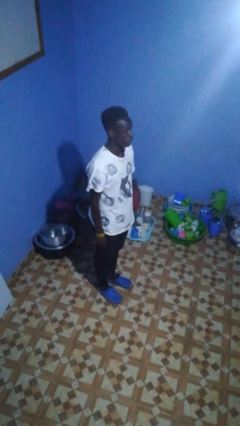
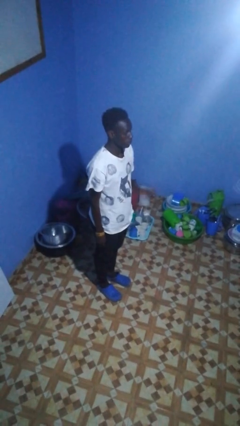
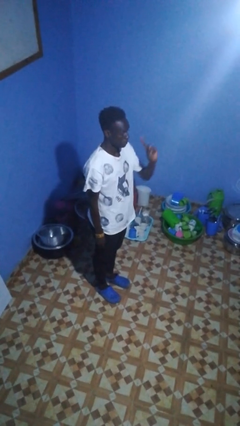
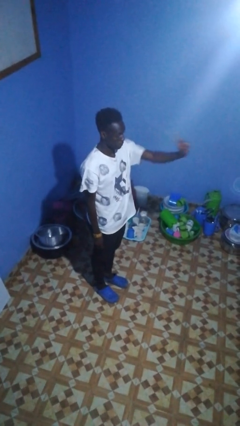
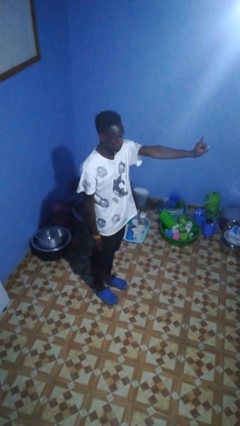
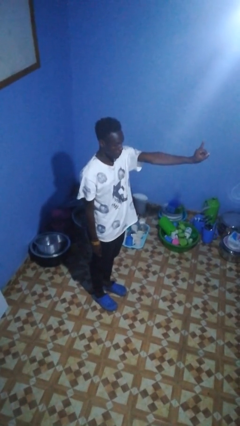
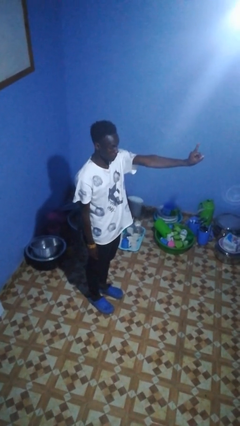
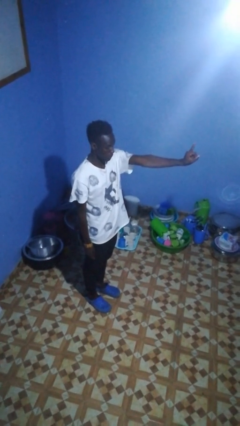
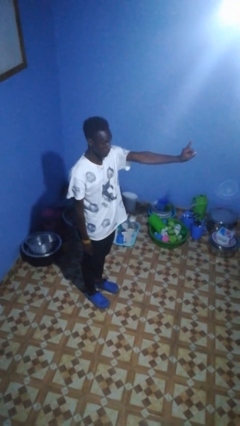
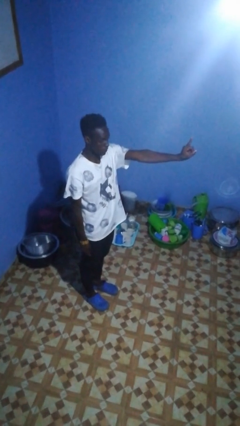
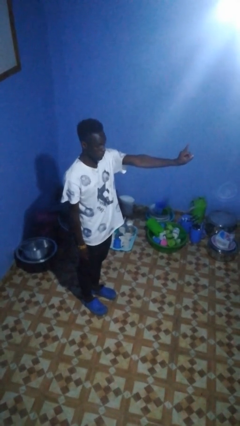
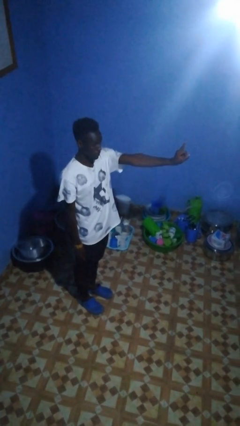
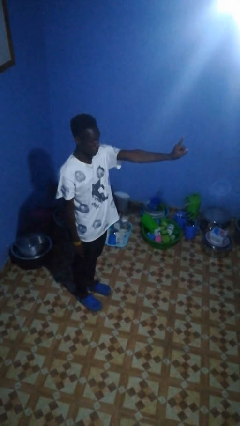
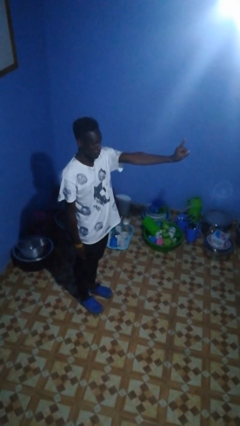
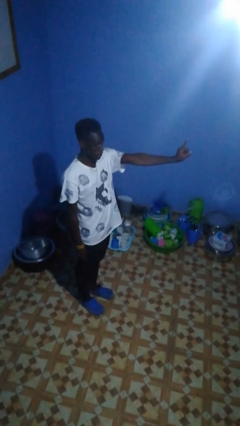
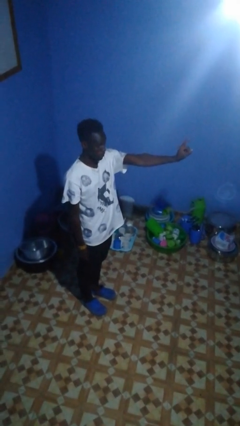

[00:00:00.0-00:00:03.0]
person gestures number one

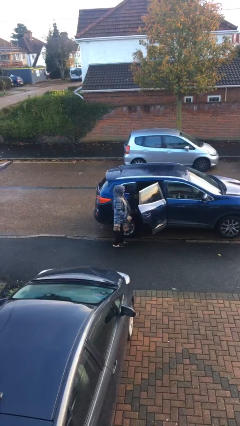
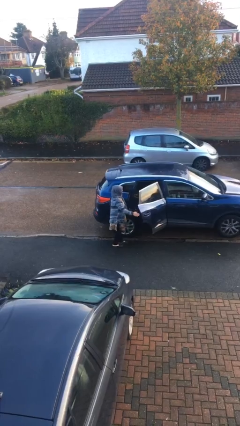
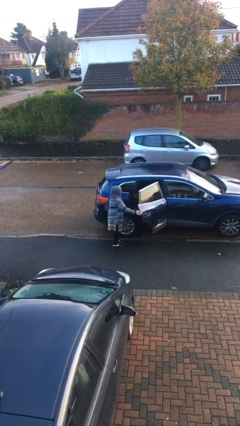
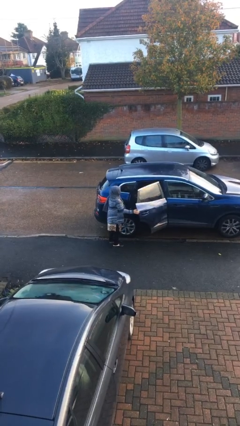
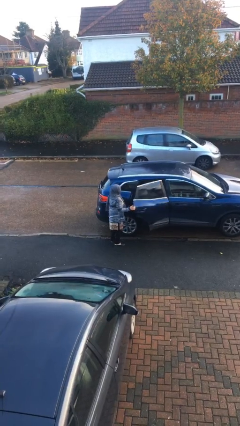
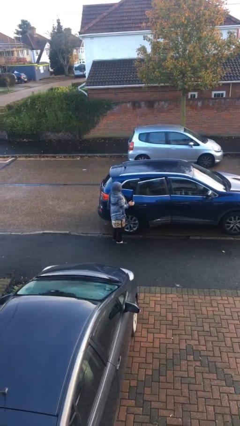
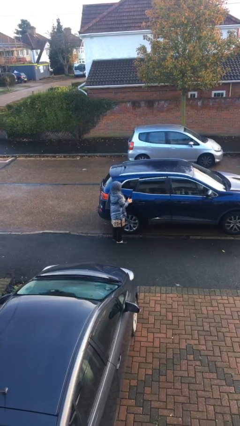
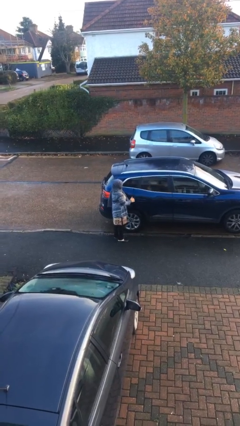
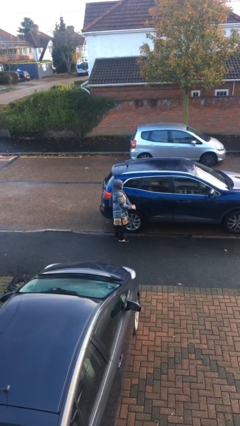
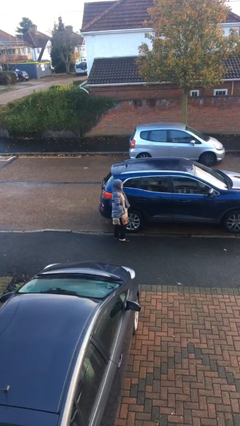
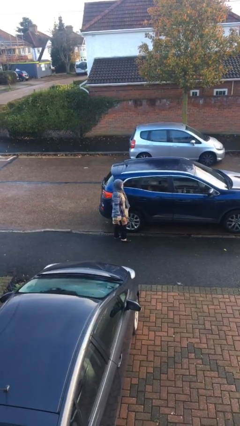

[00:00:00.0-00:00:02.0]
person closes car door

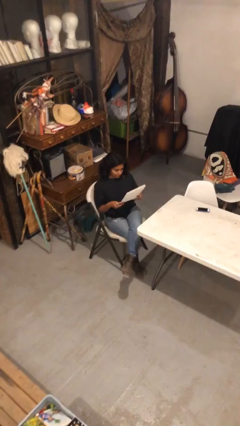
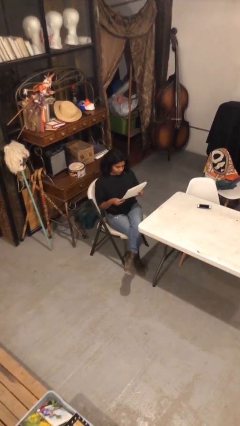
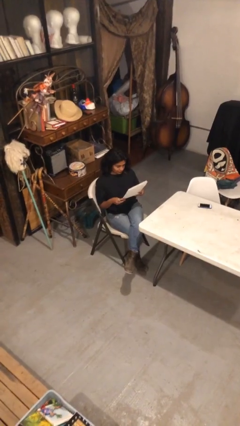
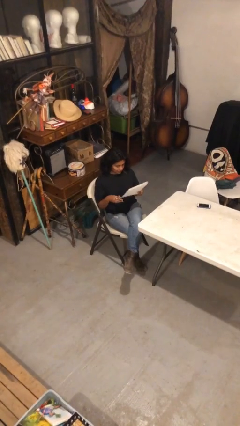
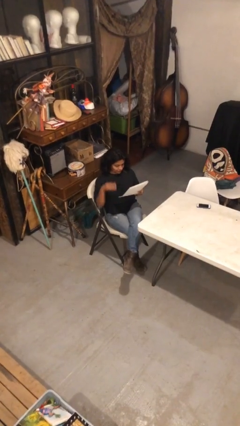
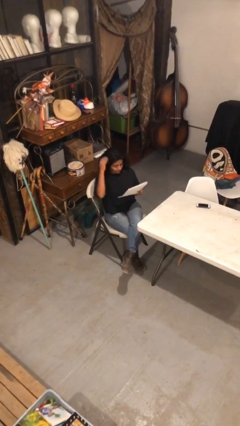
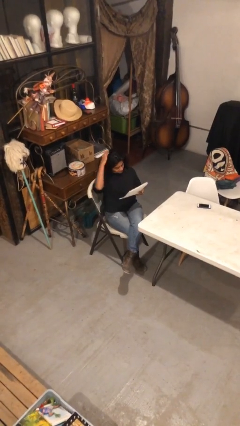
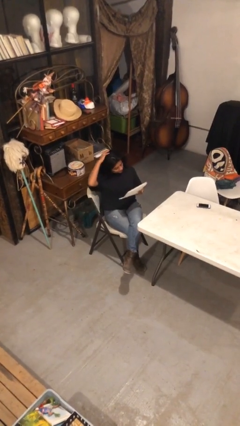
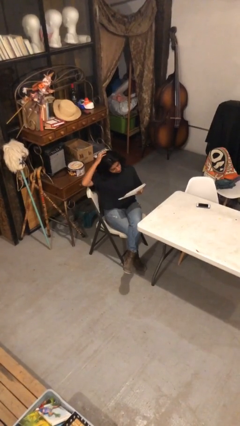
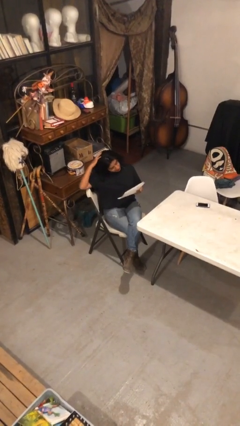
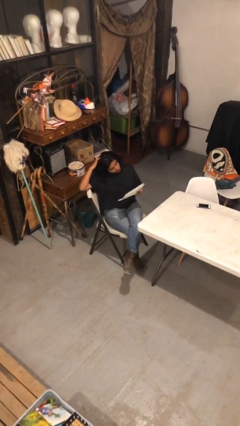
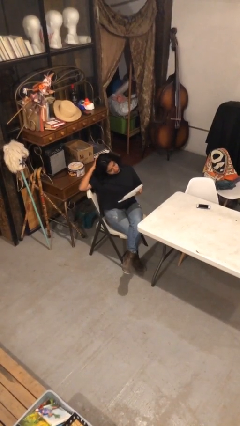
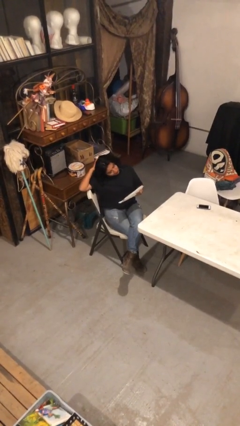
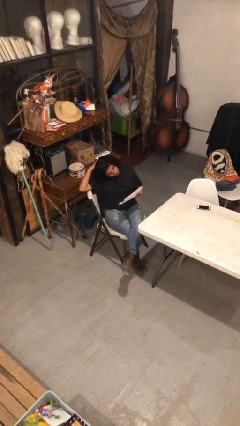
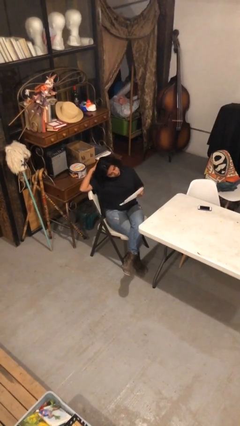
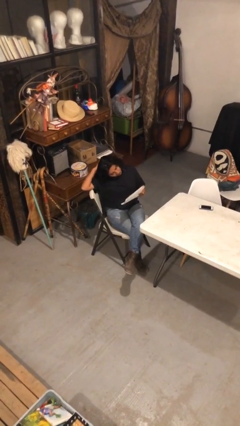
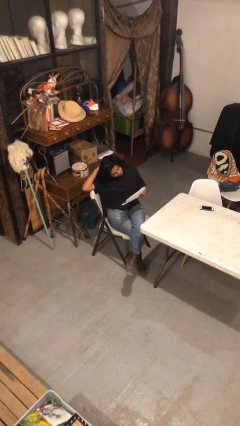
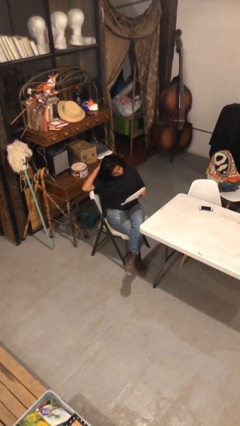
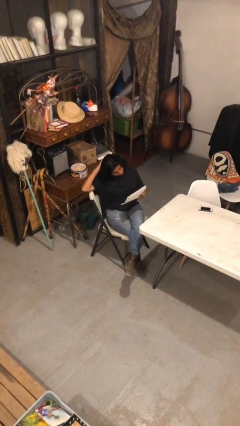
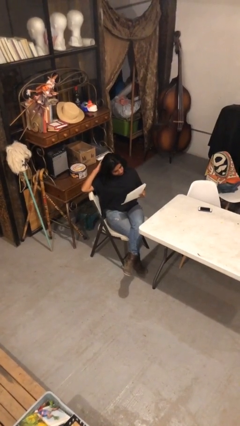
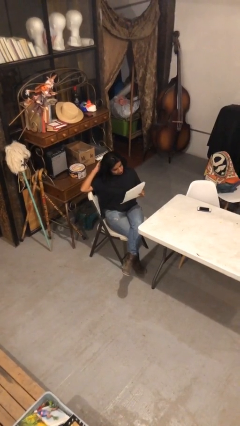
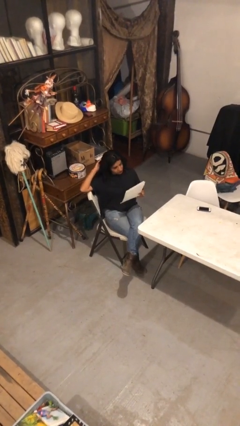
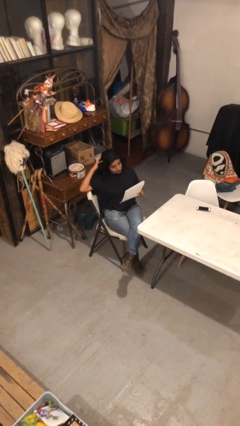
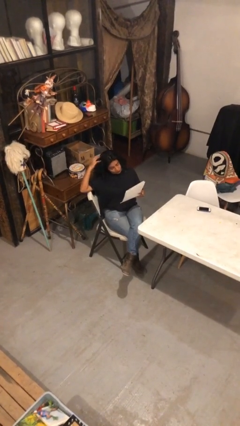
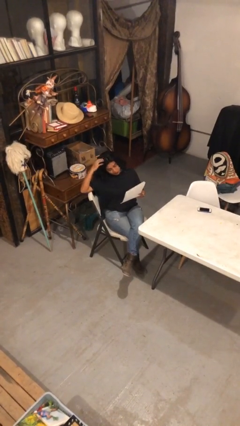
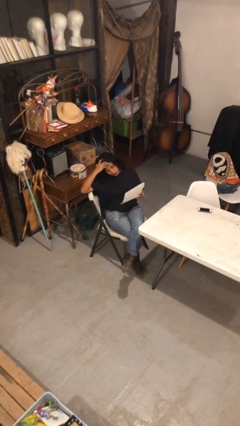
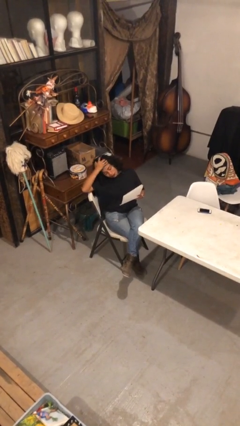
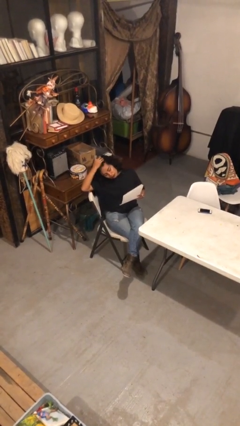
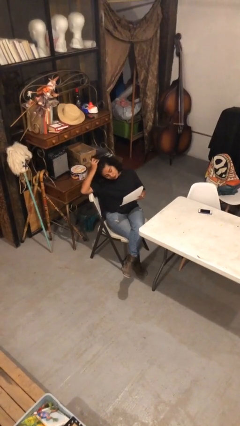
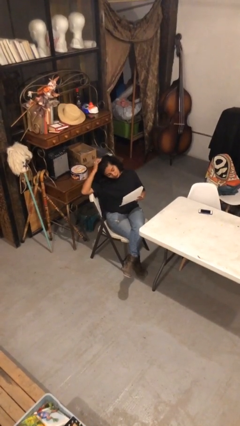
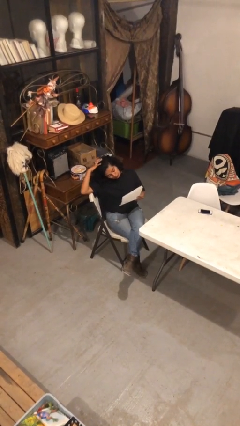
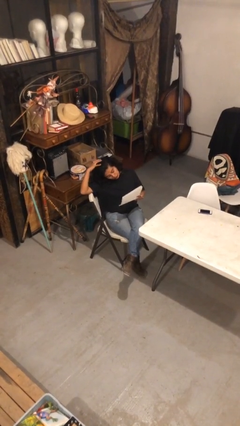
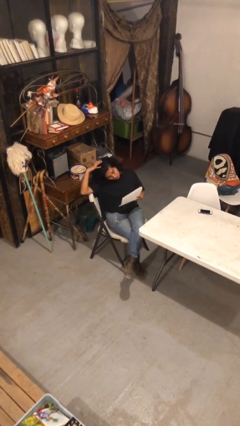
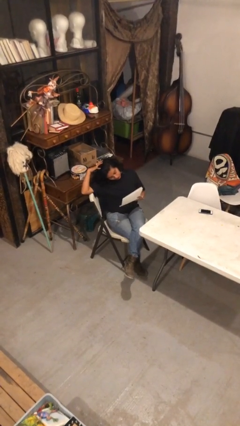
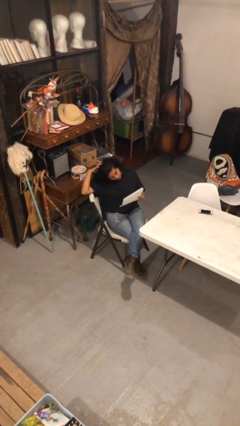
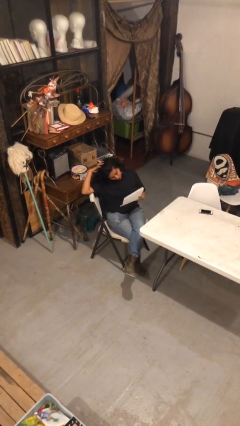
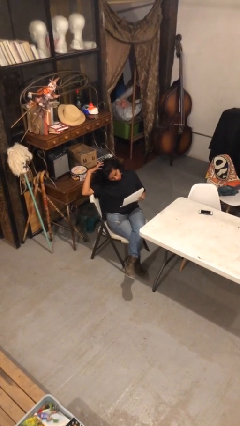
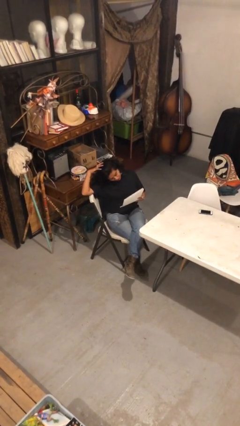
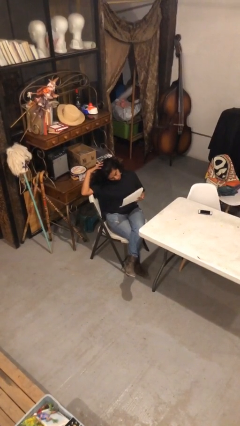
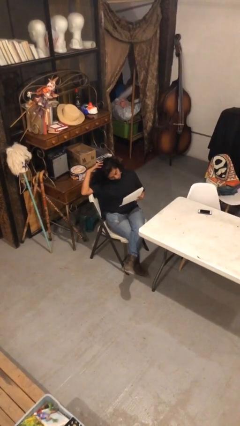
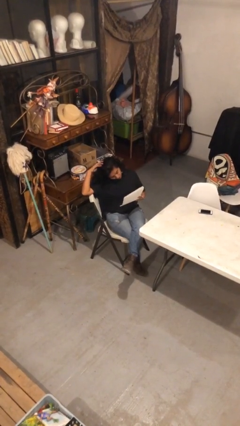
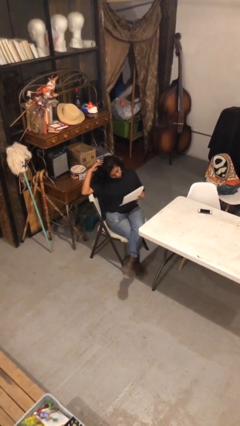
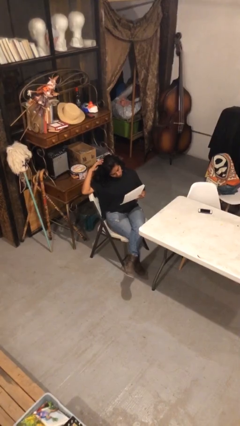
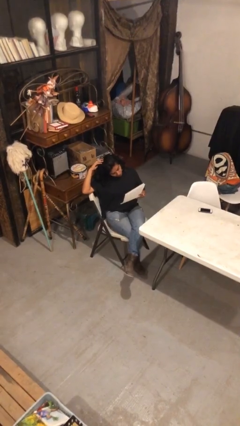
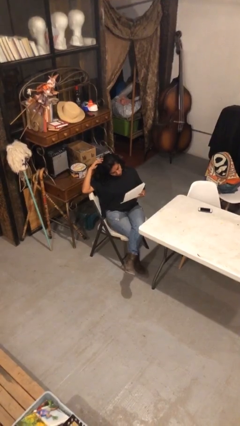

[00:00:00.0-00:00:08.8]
person reads document

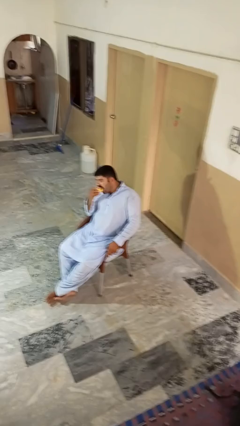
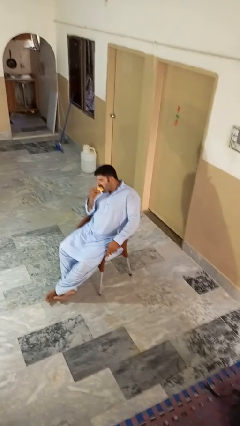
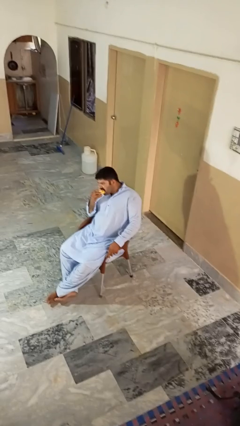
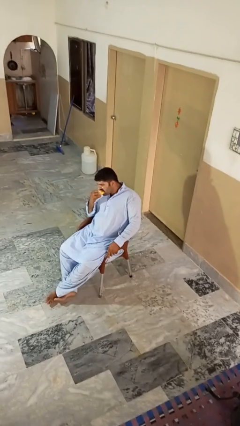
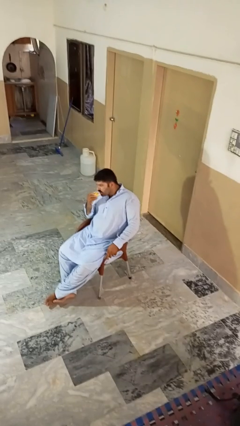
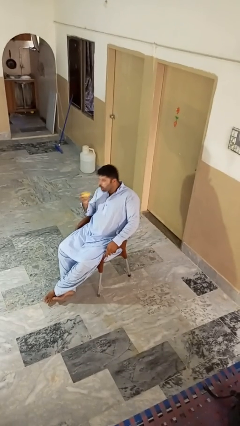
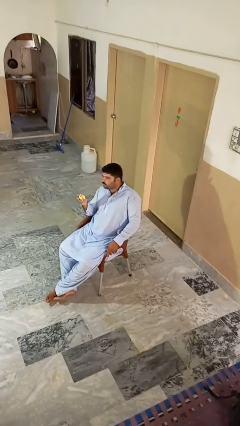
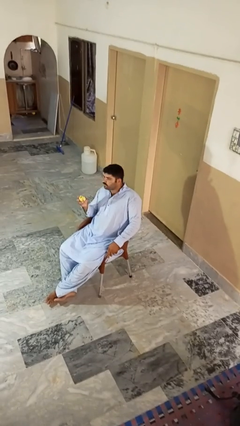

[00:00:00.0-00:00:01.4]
person eats apple

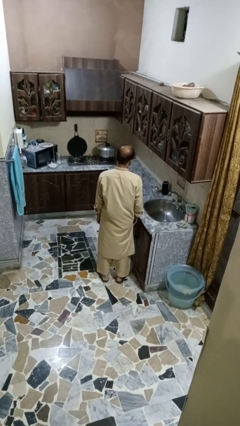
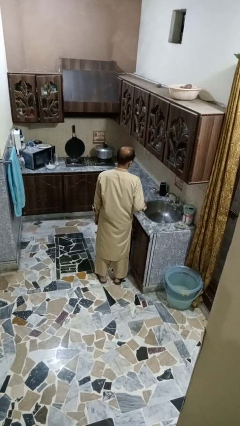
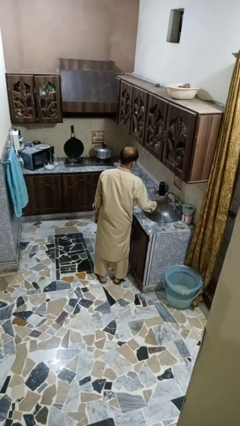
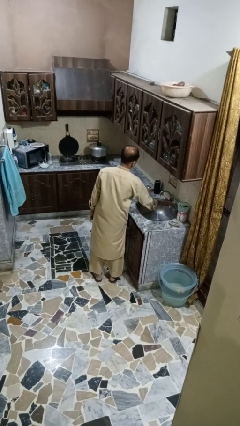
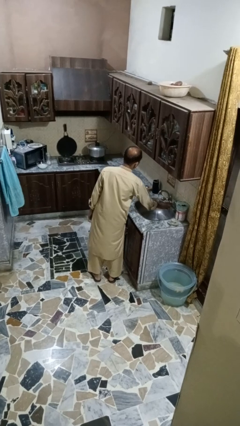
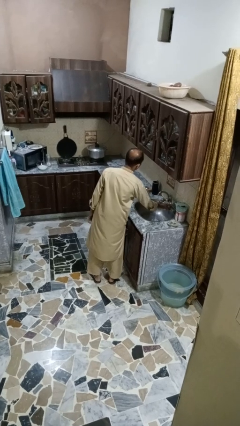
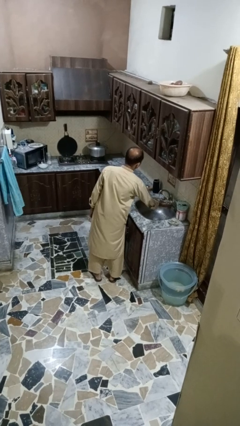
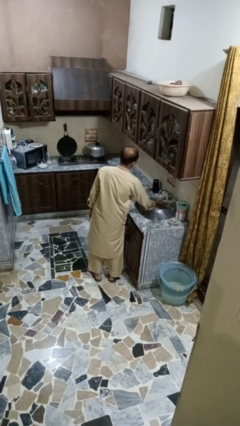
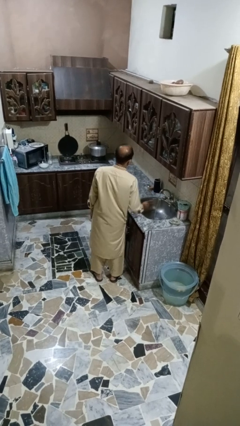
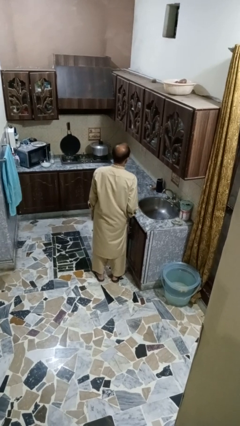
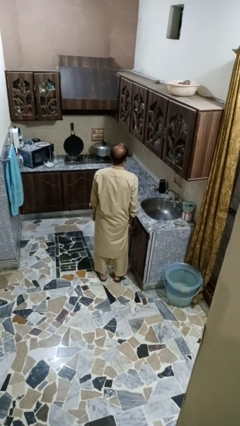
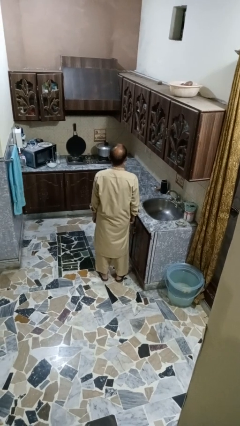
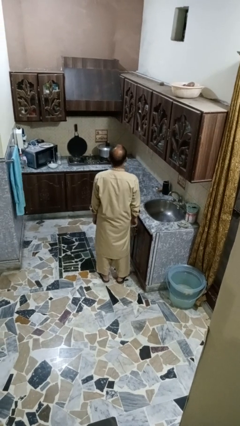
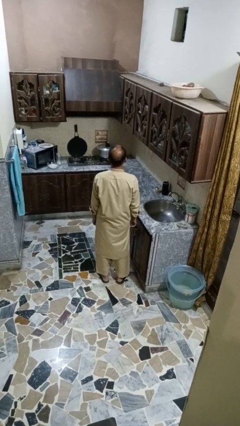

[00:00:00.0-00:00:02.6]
person turns off faucet
